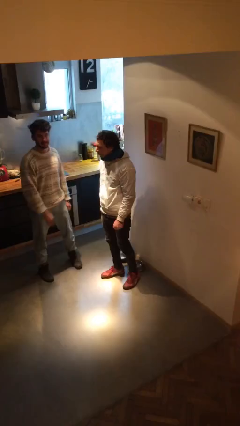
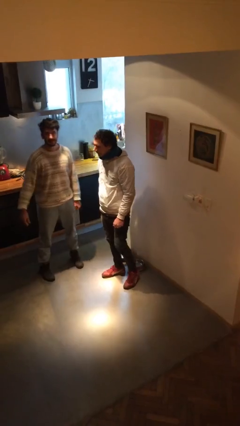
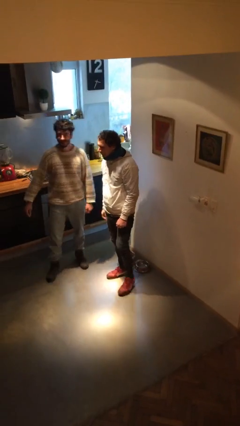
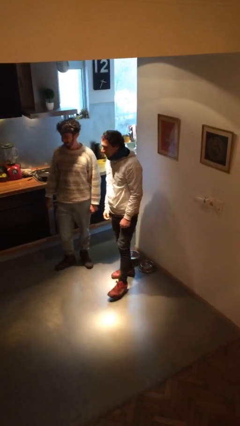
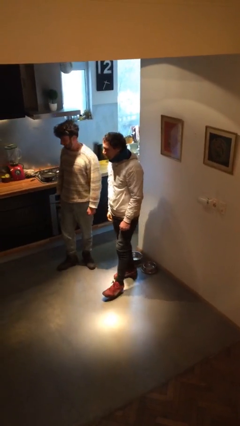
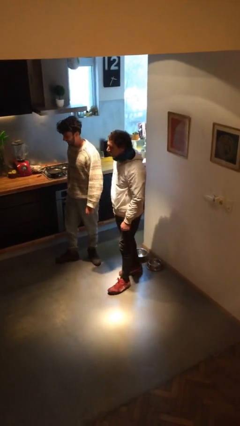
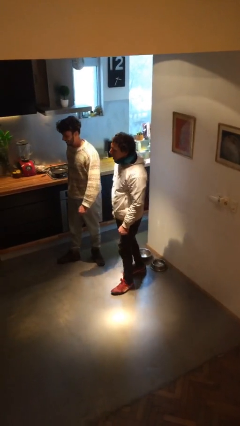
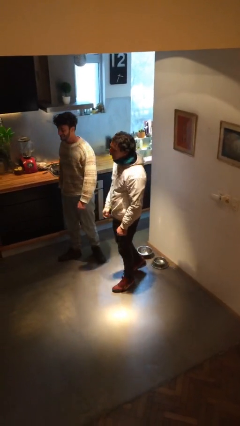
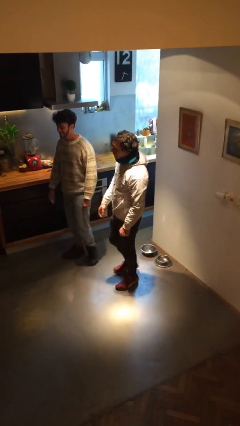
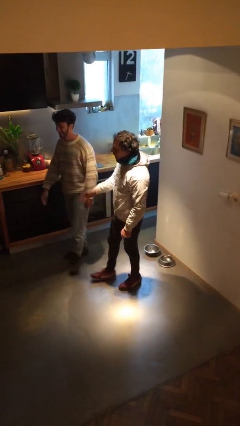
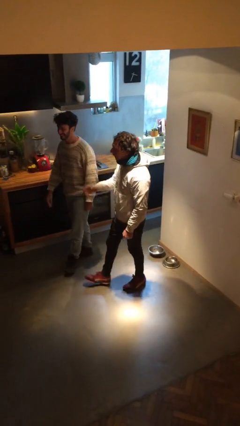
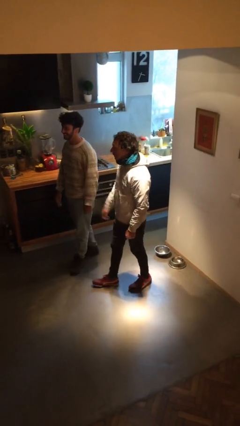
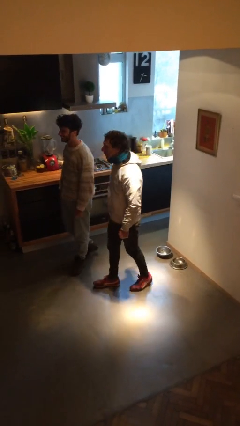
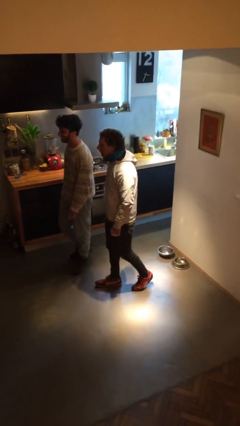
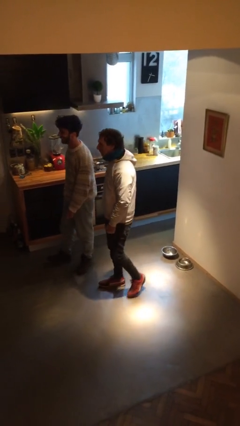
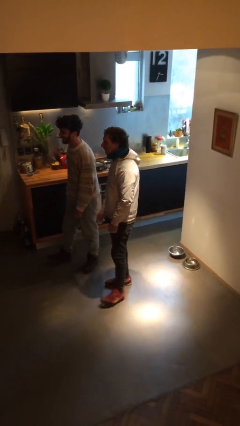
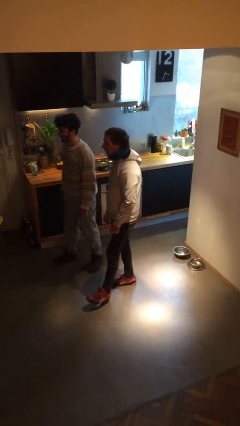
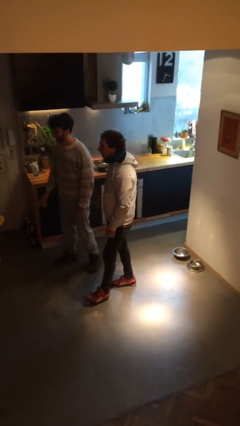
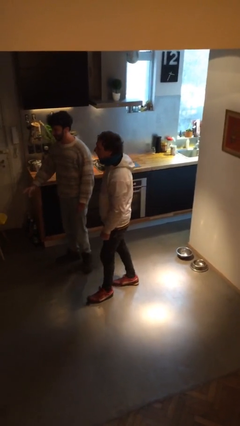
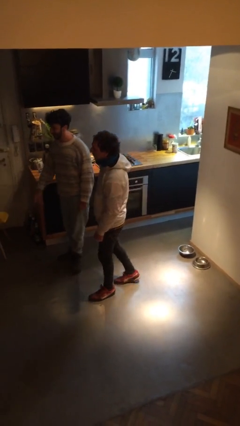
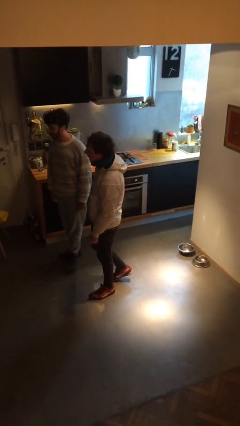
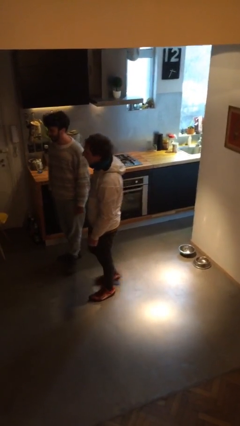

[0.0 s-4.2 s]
person talks to person

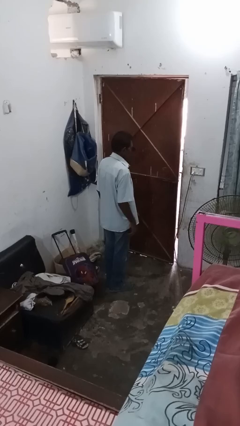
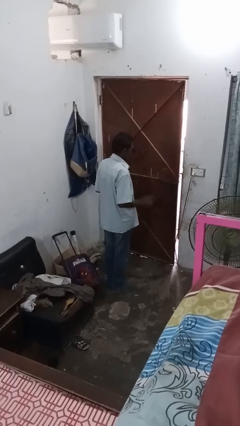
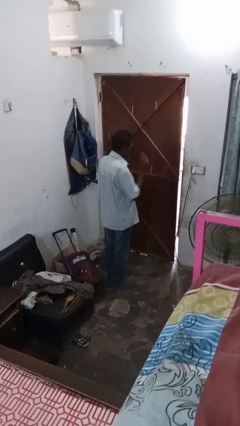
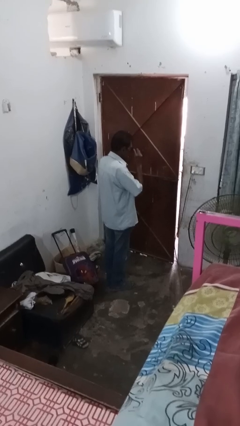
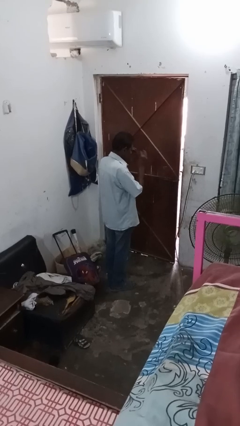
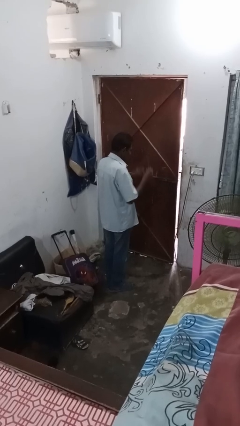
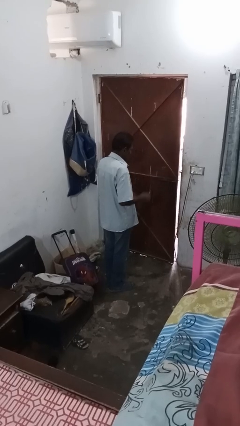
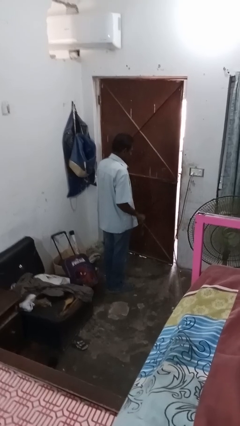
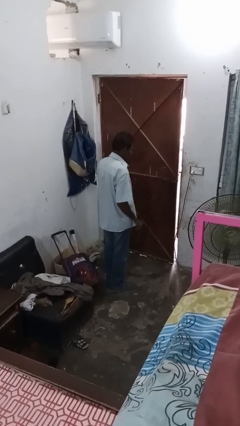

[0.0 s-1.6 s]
person takes off sunglasses

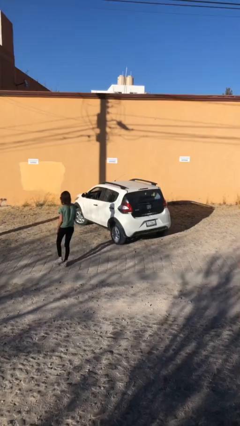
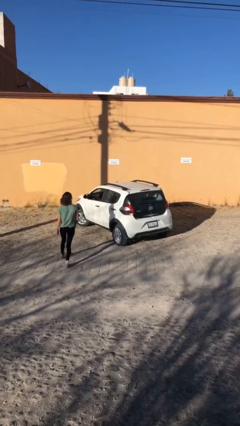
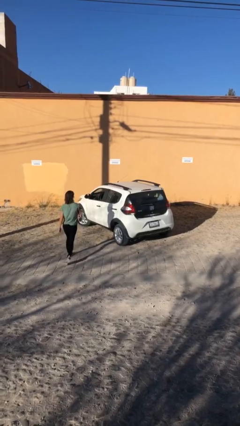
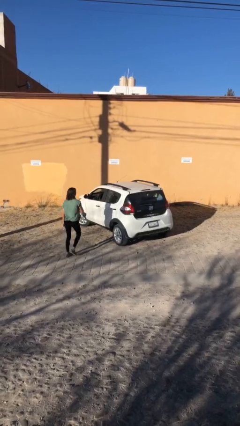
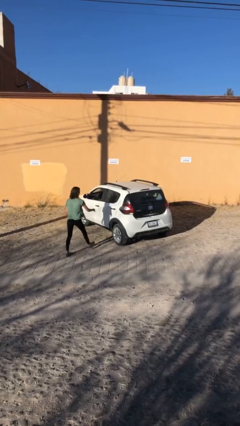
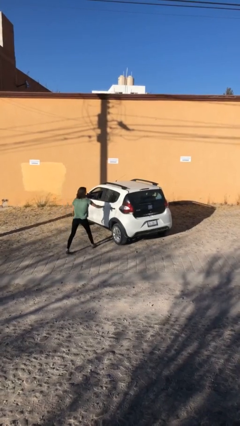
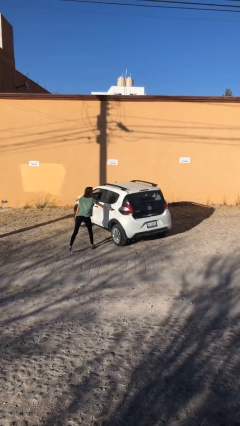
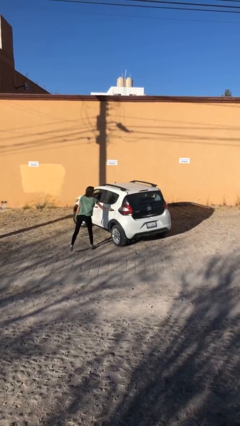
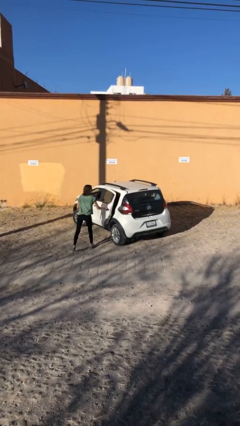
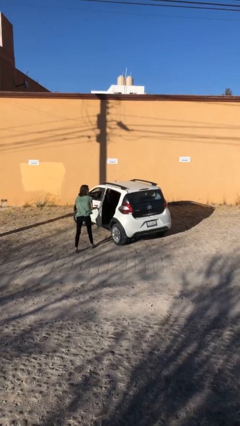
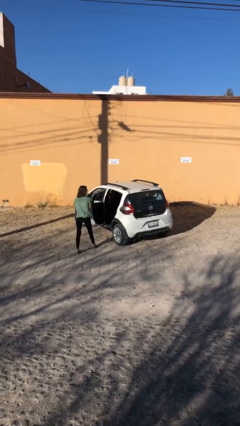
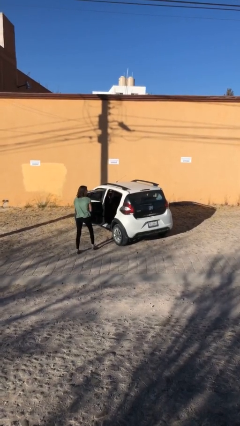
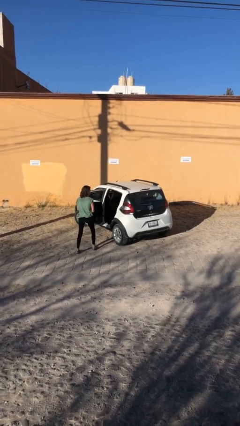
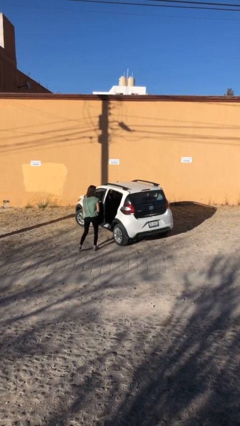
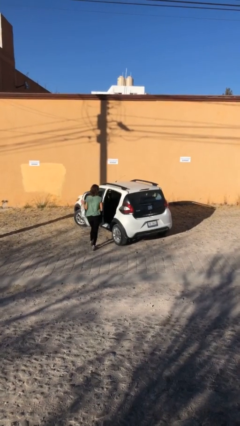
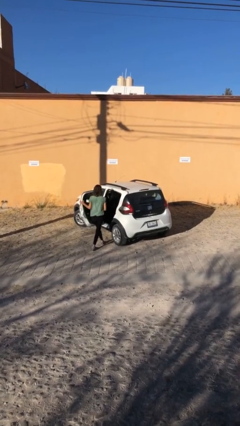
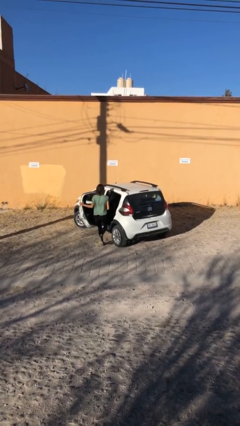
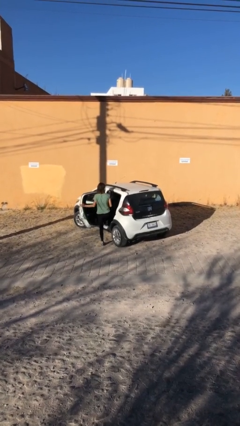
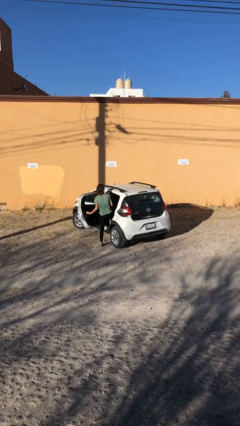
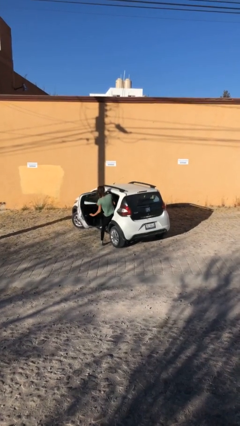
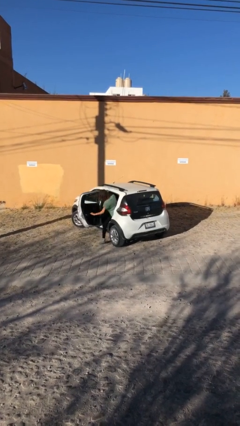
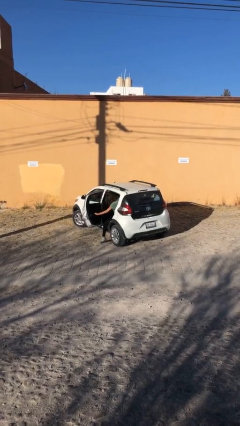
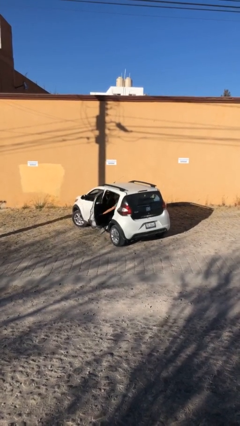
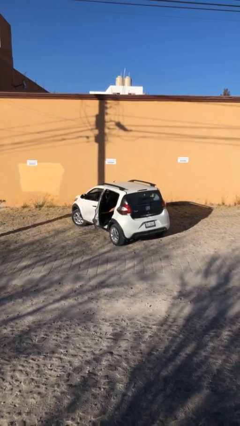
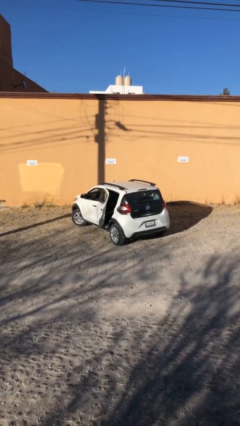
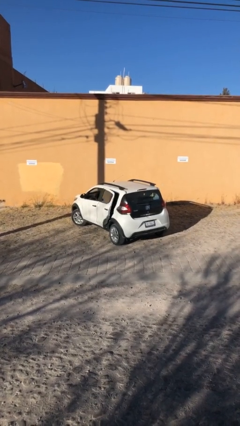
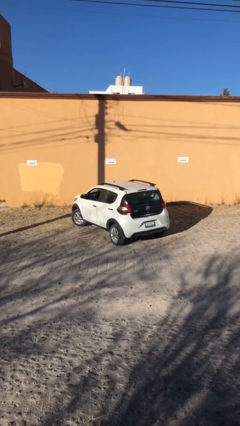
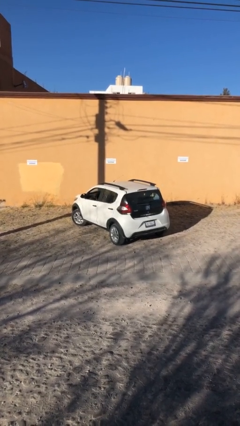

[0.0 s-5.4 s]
car picks up person

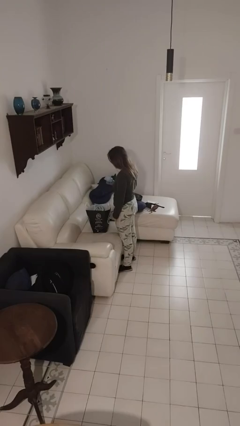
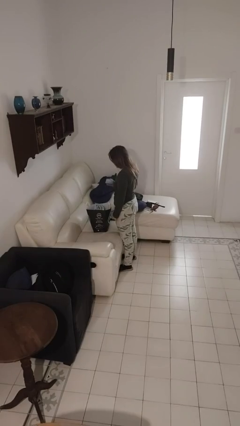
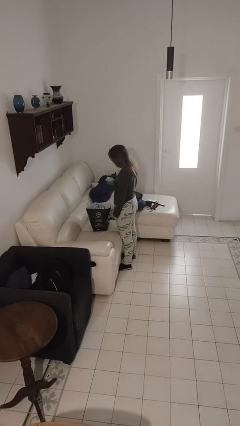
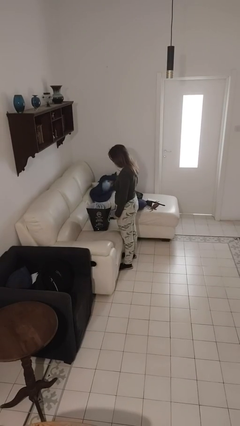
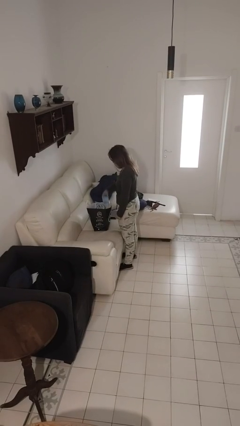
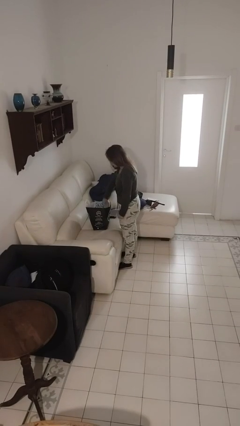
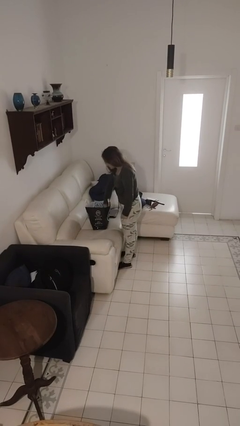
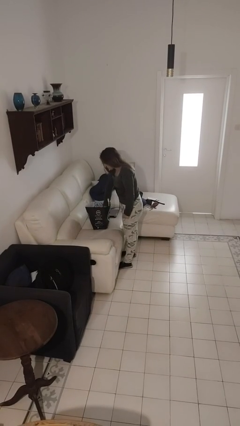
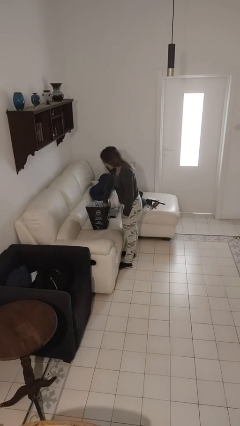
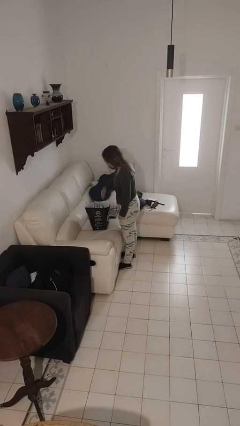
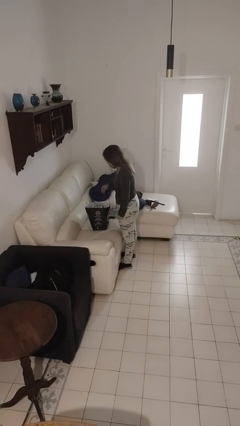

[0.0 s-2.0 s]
person puts object into bag

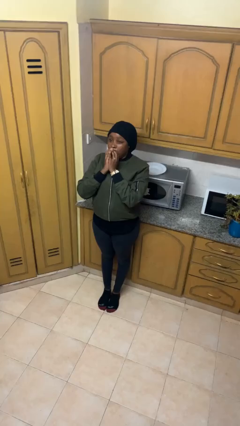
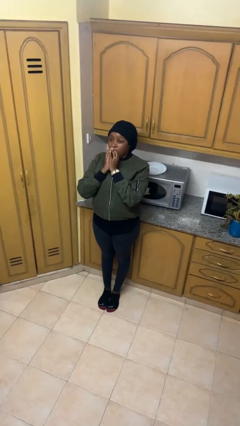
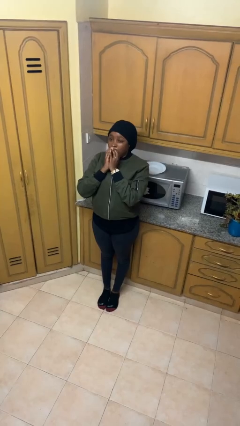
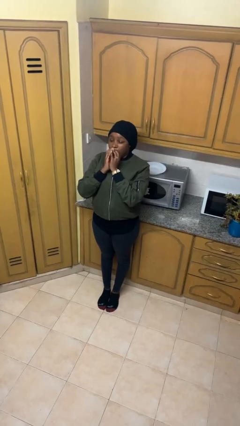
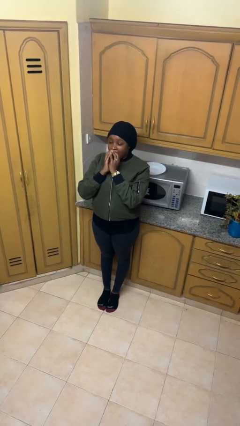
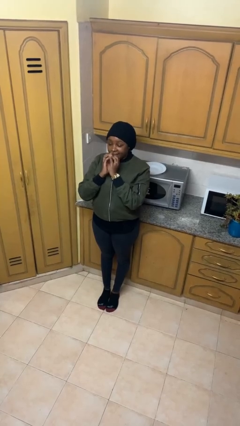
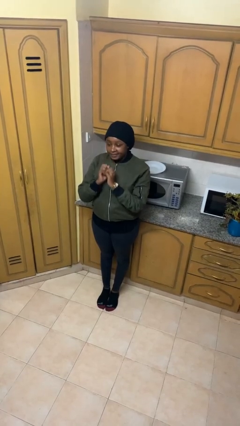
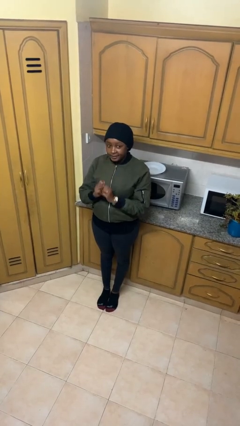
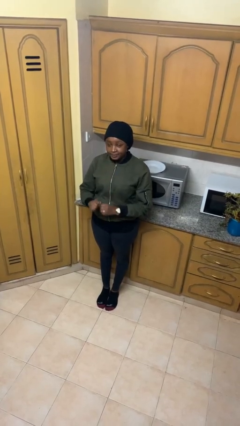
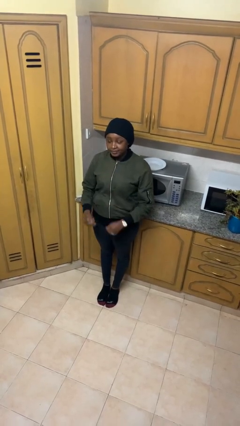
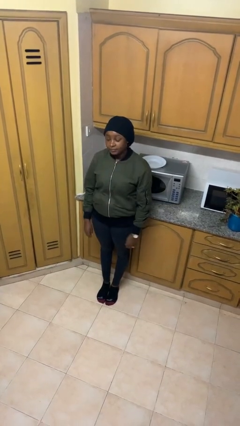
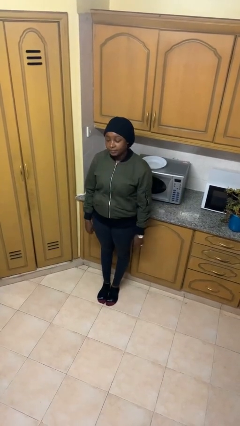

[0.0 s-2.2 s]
person yawns

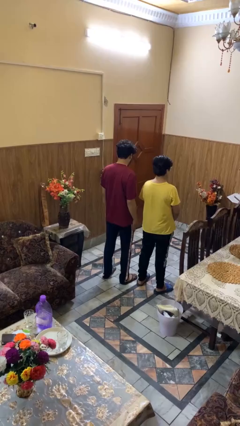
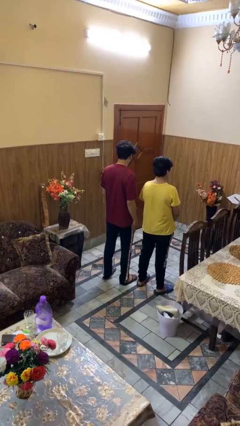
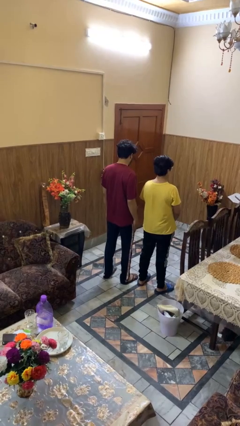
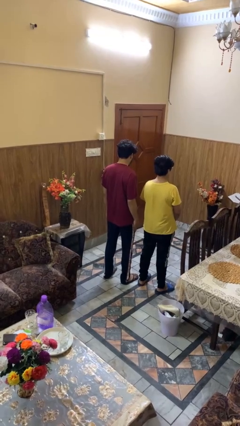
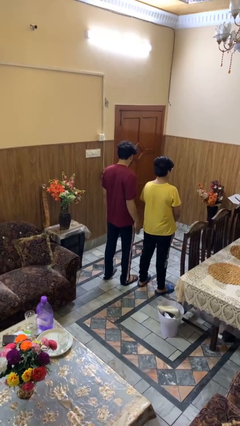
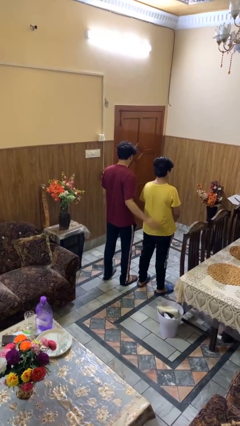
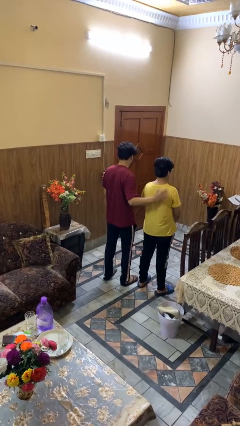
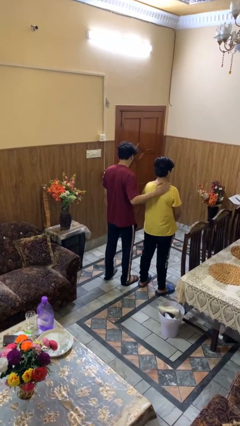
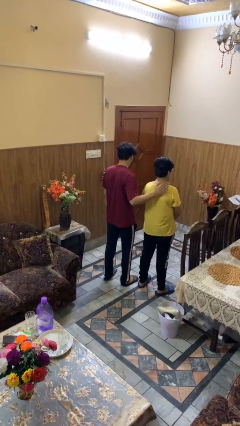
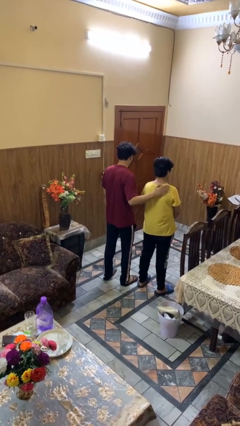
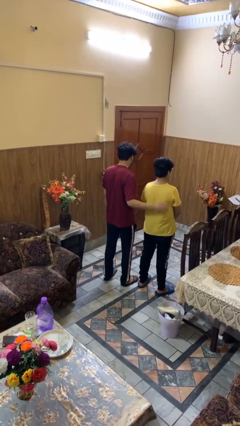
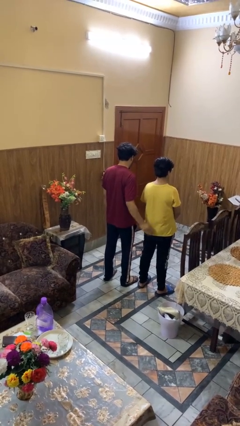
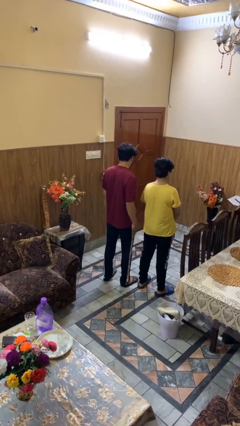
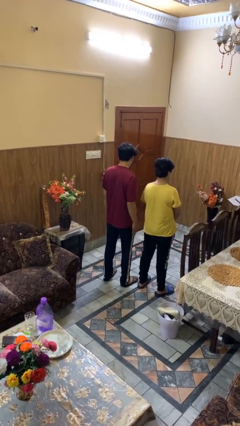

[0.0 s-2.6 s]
person touches back of person
